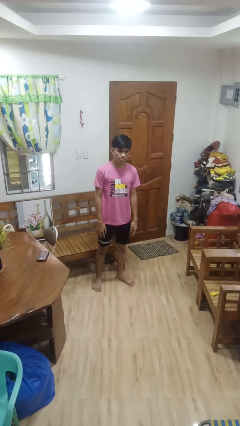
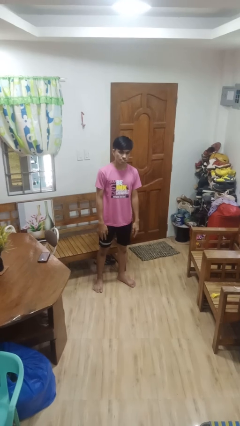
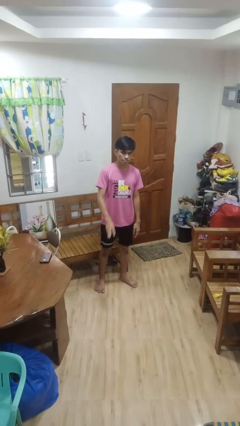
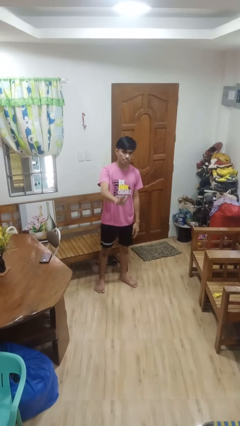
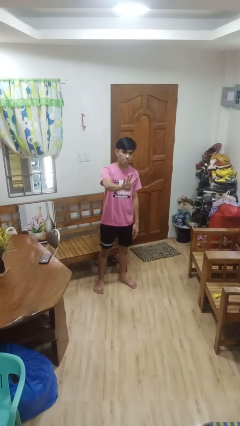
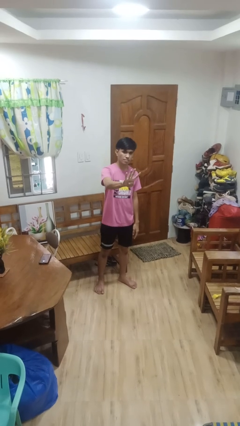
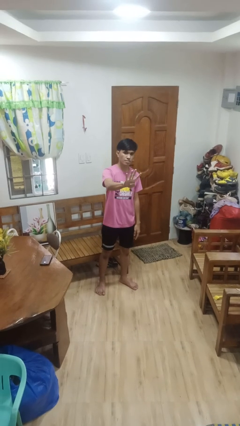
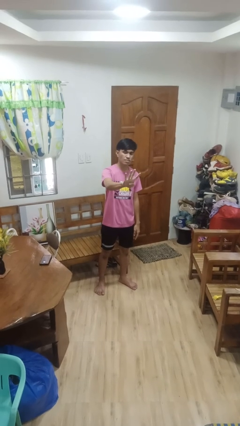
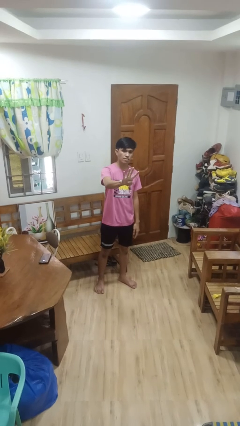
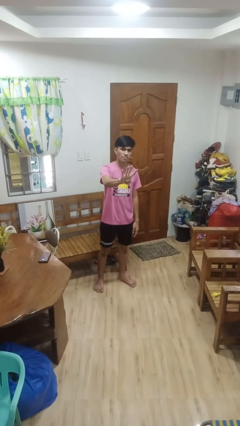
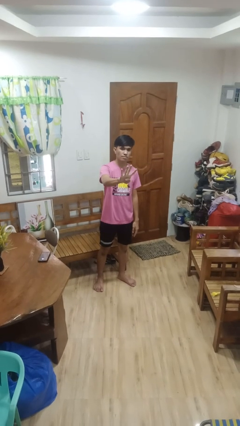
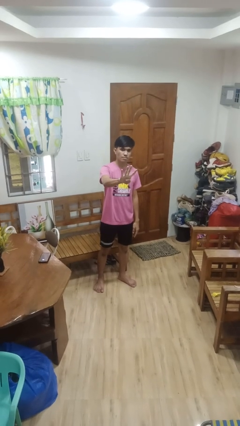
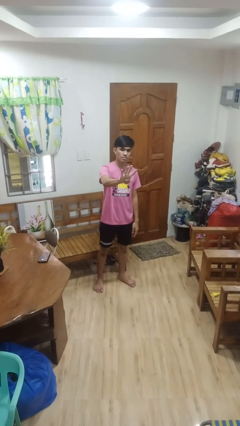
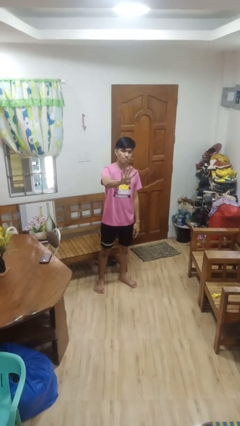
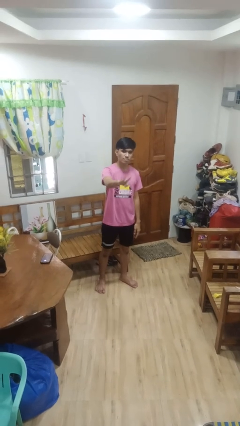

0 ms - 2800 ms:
person gestures number four

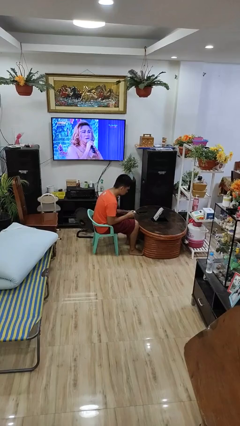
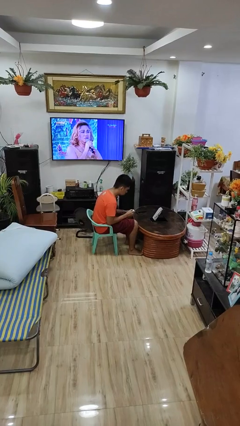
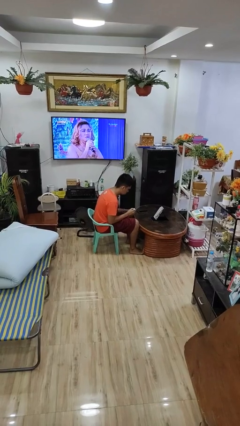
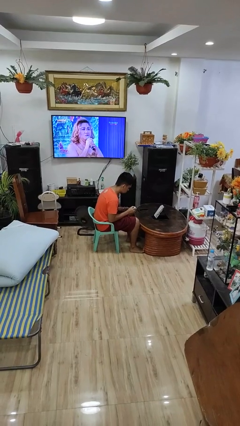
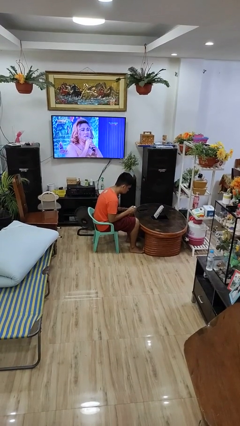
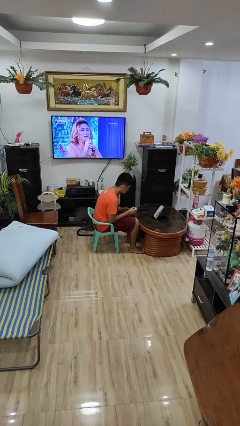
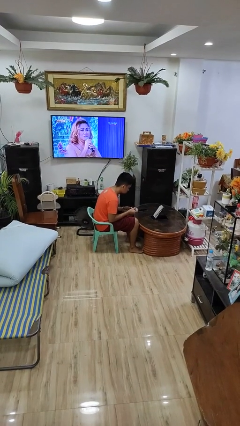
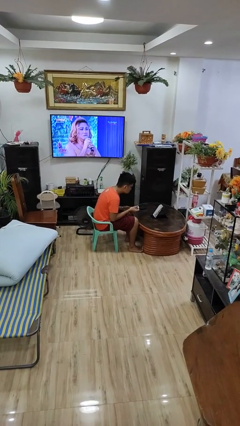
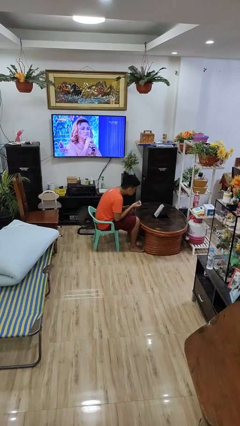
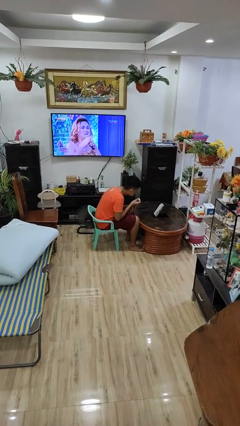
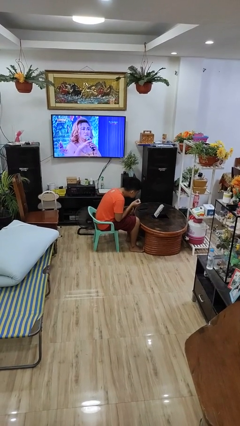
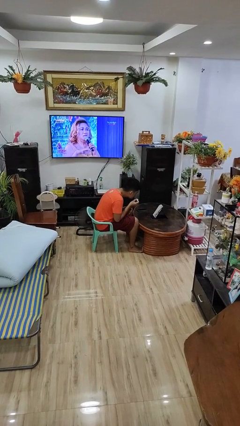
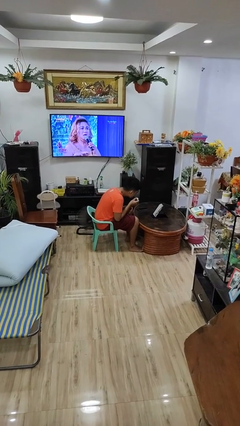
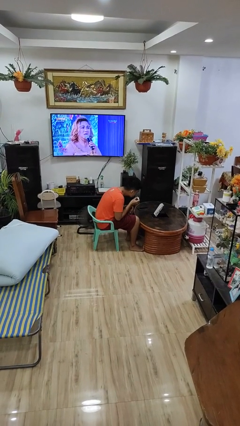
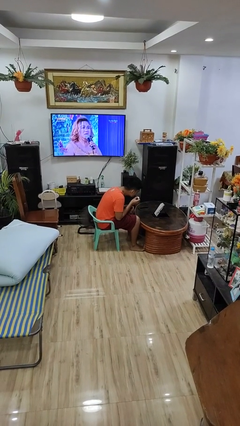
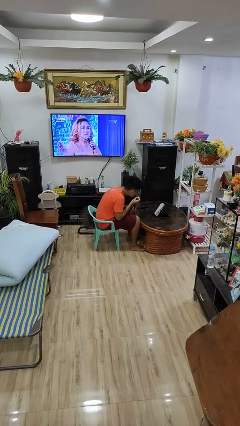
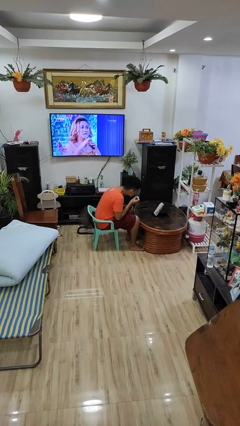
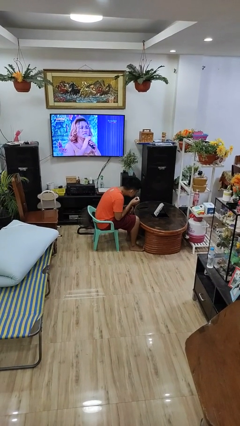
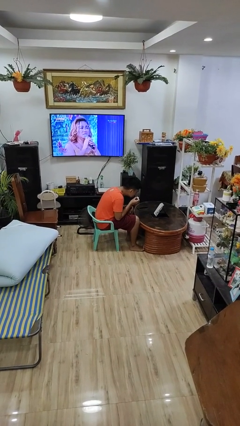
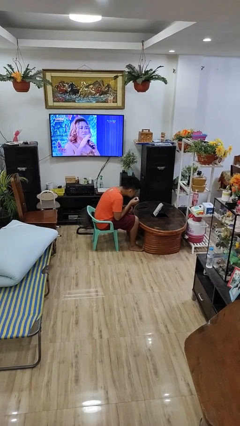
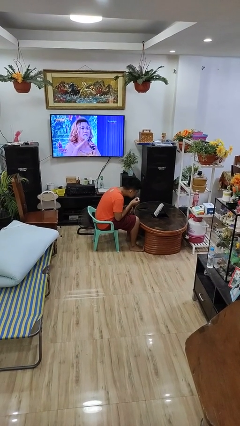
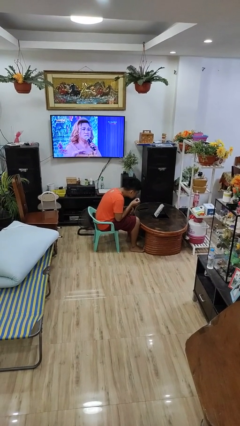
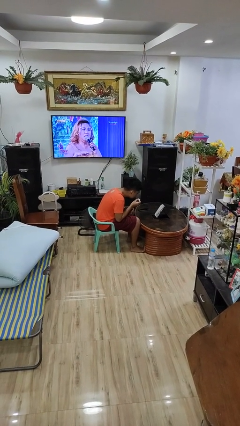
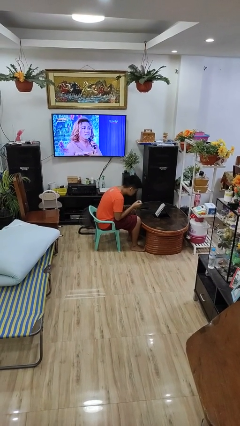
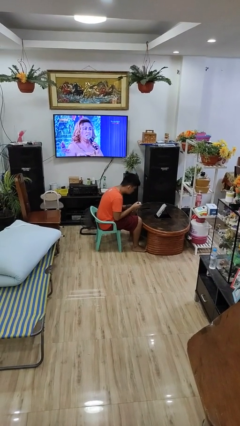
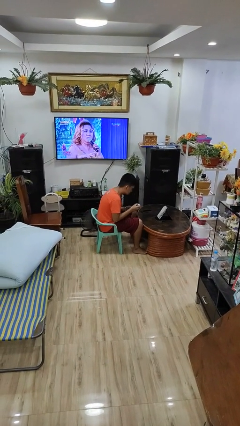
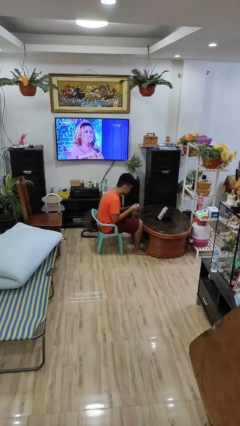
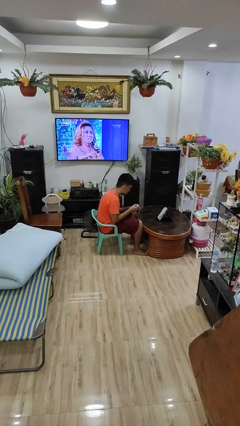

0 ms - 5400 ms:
person applies lip makeup

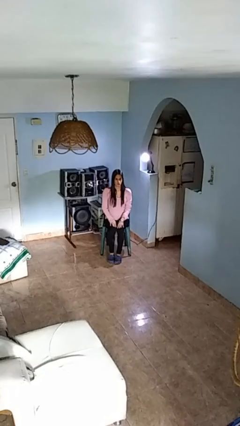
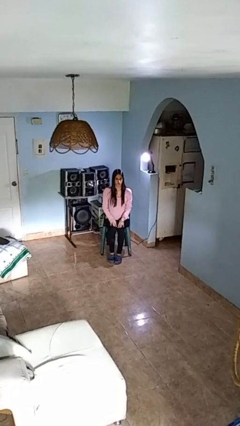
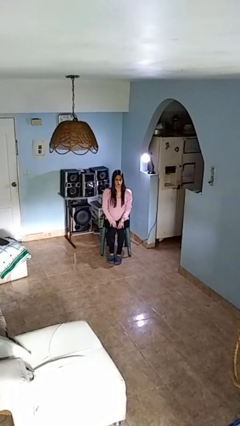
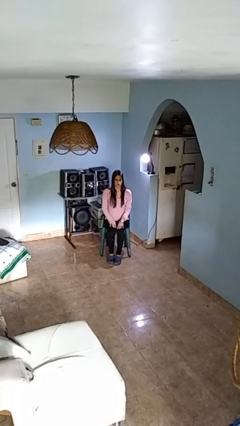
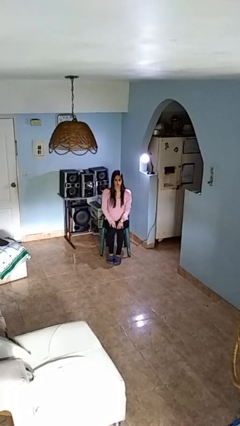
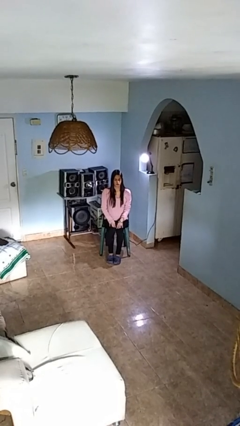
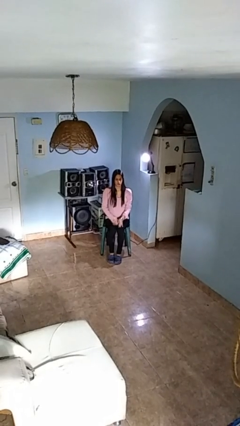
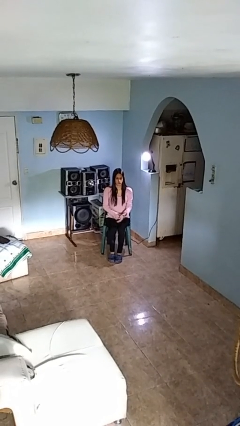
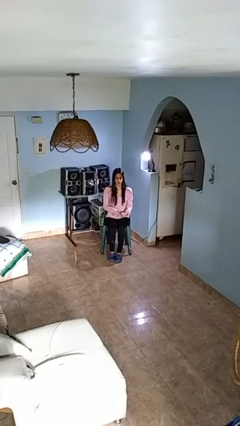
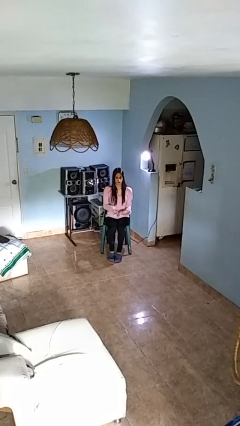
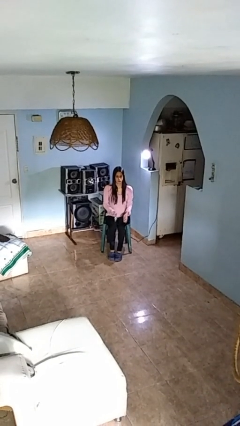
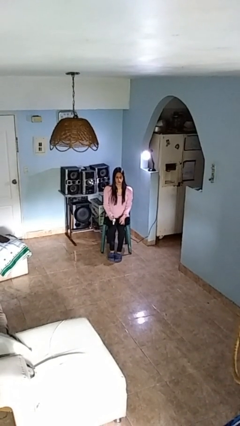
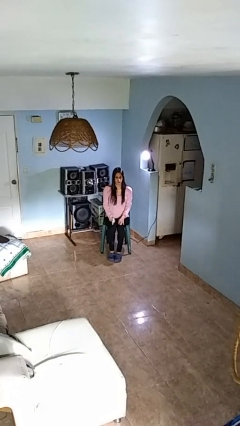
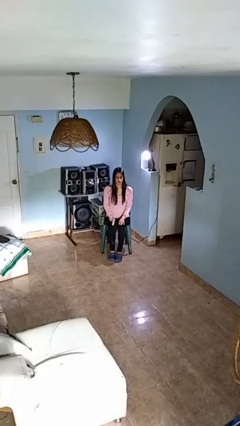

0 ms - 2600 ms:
person takes off wristwatch

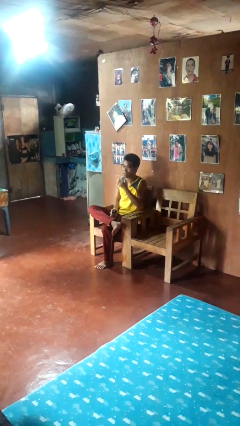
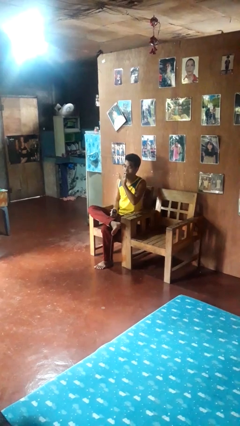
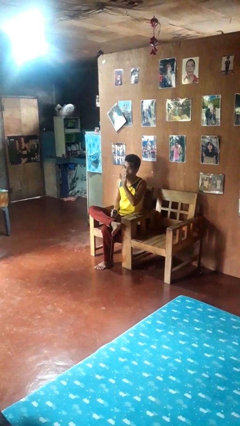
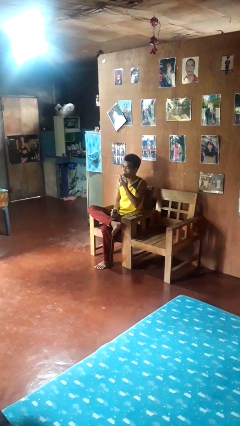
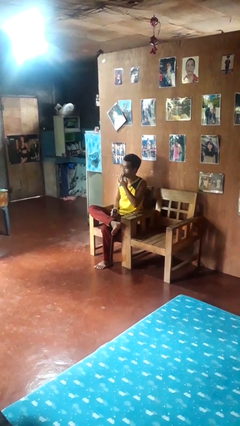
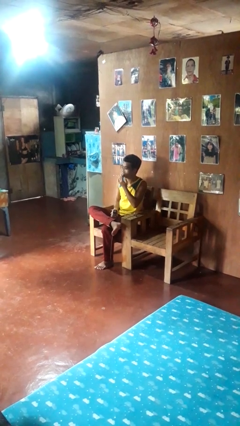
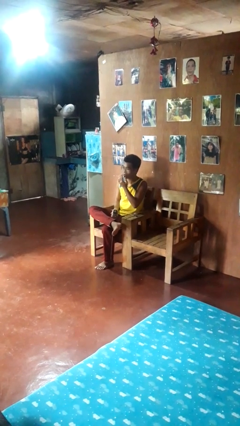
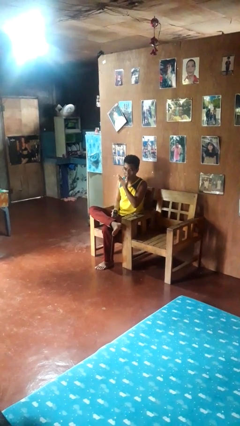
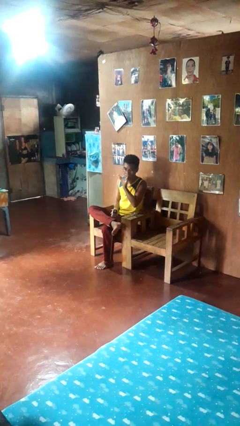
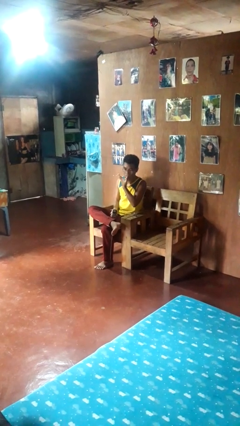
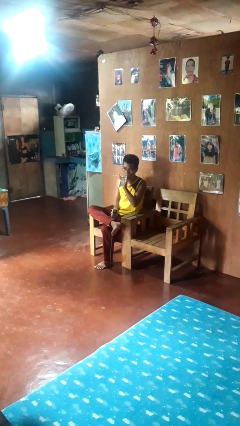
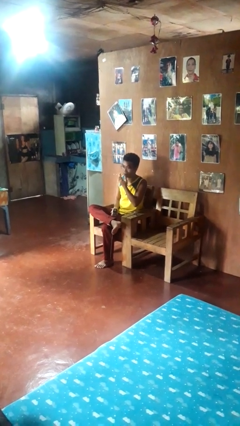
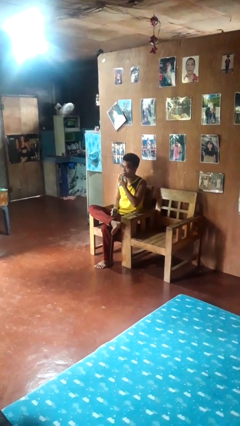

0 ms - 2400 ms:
person licks fingers

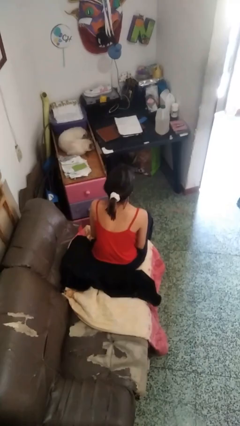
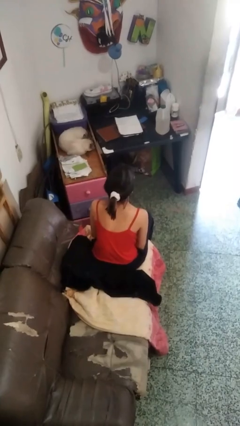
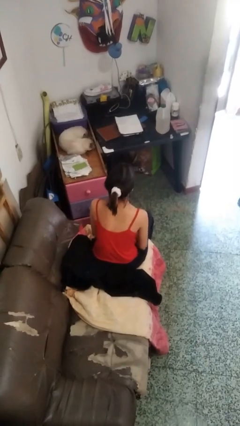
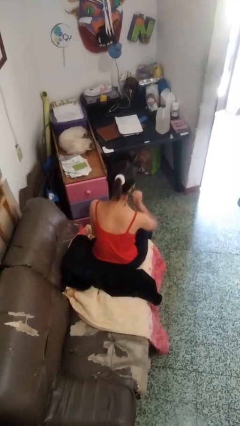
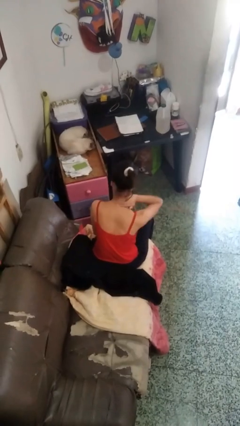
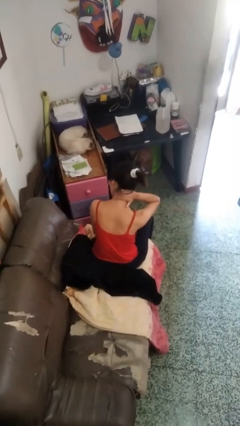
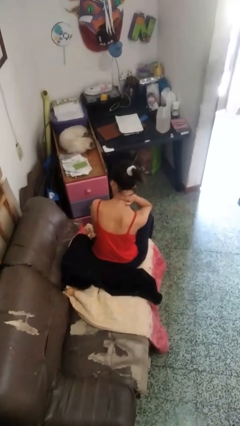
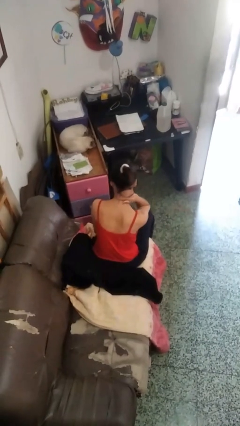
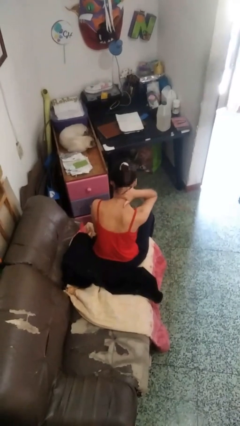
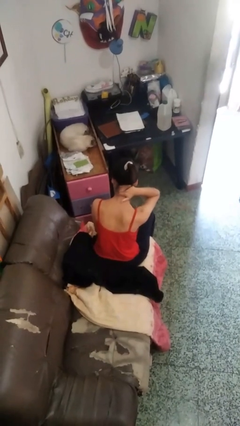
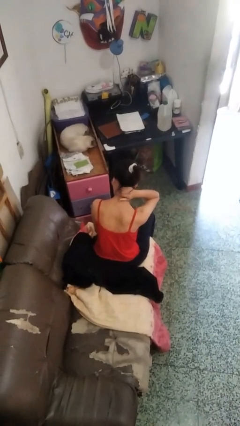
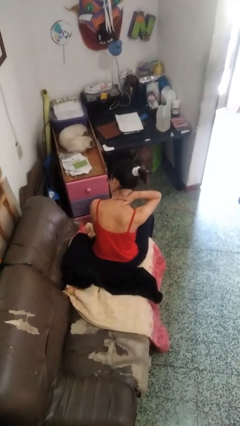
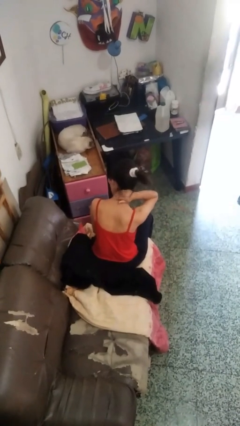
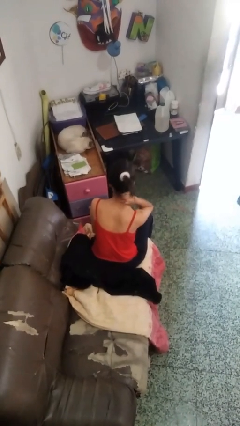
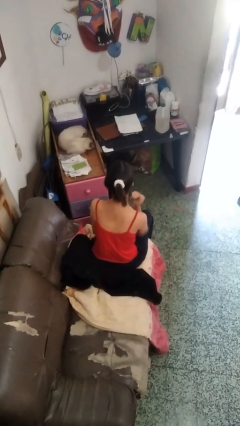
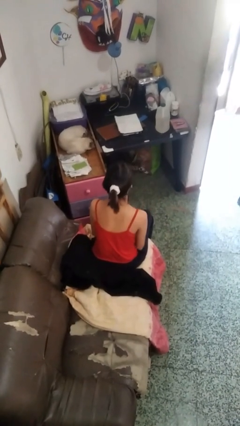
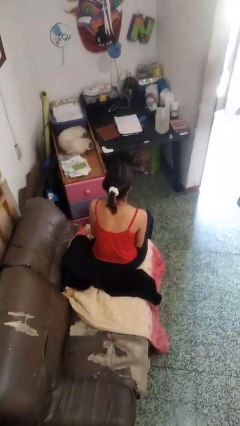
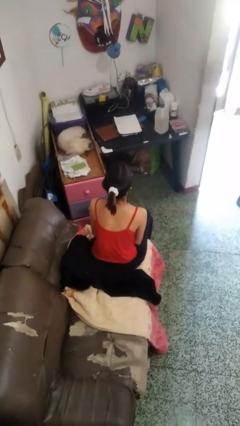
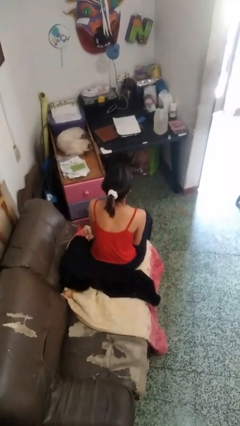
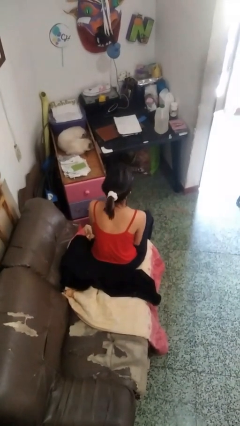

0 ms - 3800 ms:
person rubs neck

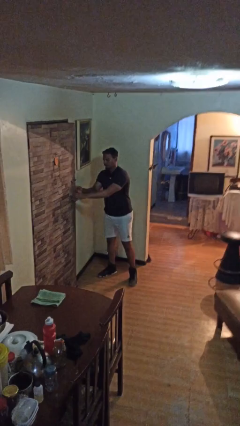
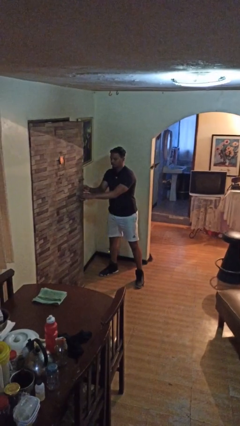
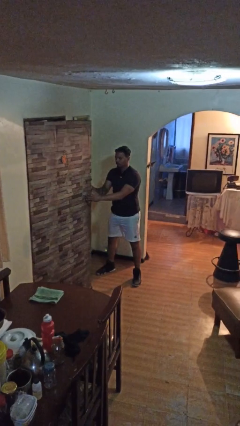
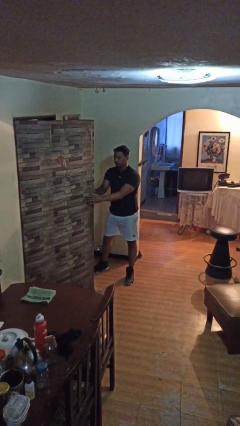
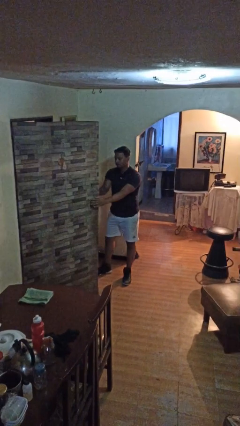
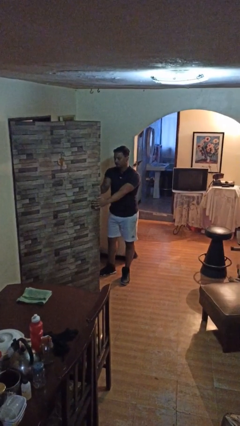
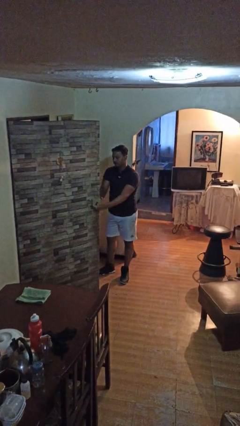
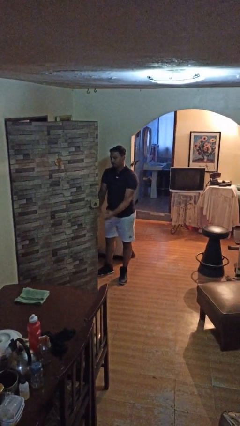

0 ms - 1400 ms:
person opens facility door
